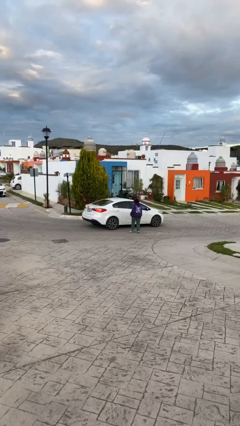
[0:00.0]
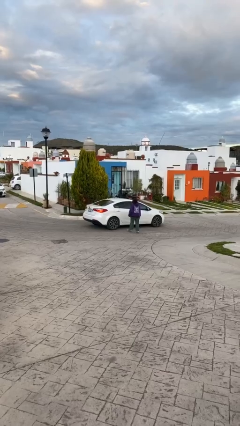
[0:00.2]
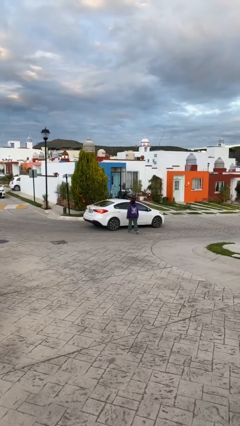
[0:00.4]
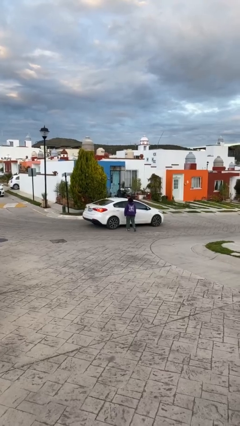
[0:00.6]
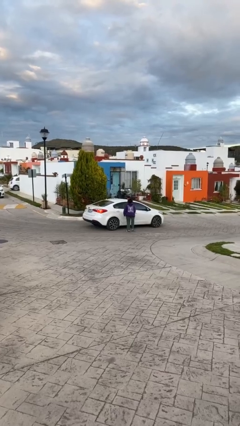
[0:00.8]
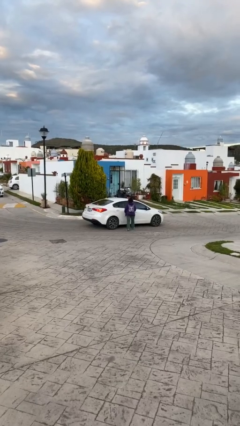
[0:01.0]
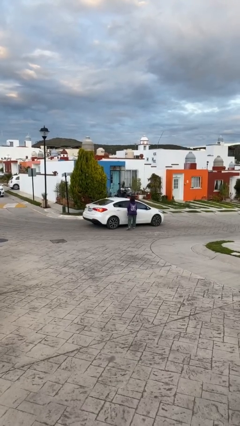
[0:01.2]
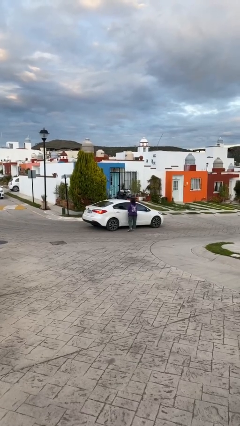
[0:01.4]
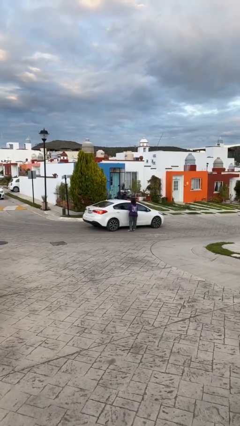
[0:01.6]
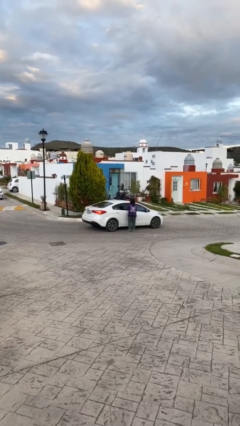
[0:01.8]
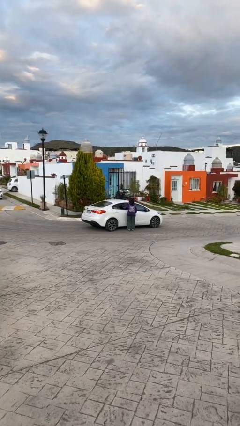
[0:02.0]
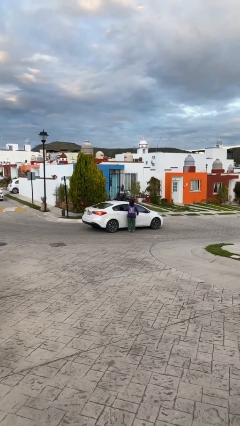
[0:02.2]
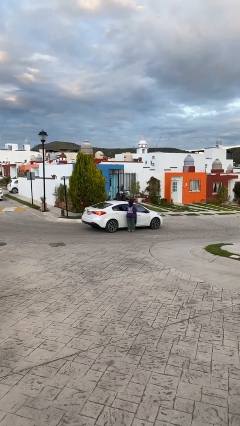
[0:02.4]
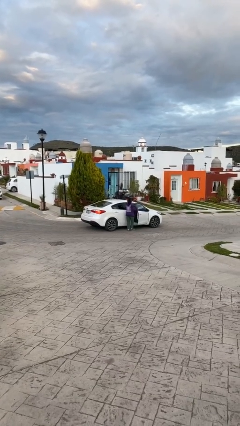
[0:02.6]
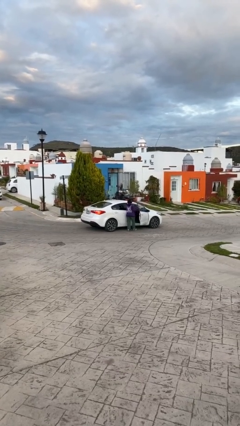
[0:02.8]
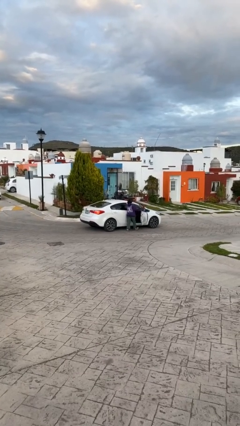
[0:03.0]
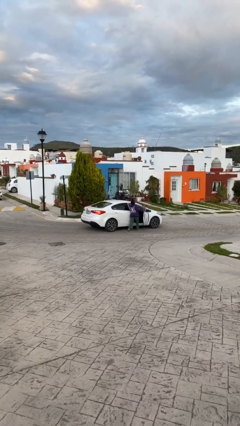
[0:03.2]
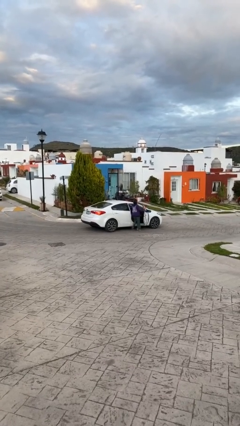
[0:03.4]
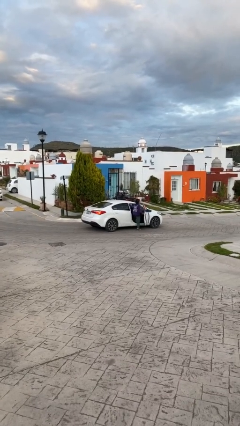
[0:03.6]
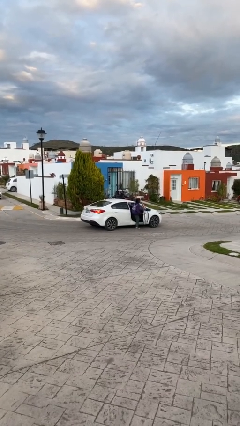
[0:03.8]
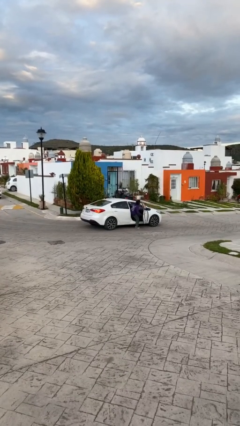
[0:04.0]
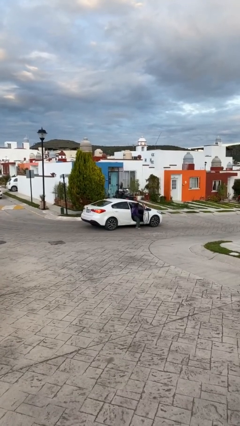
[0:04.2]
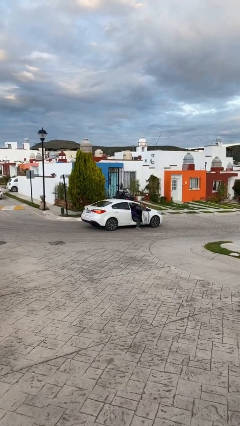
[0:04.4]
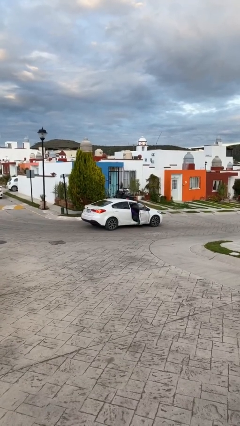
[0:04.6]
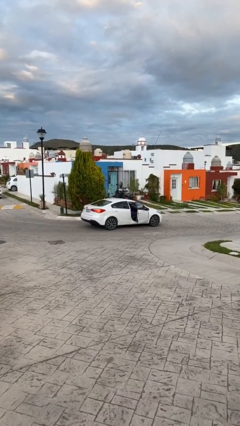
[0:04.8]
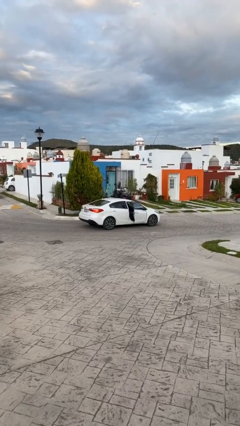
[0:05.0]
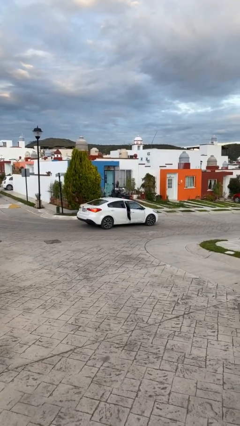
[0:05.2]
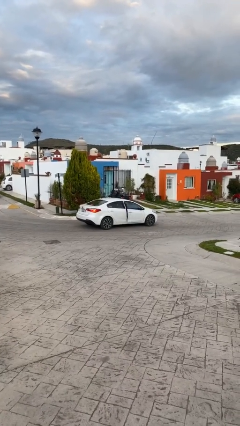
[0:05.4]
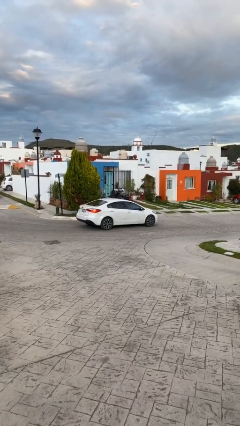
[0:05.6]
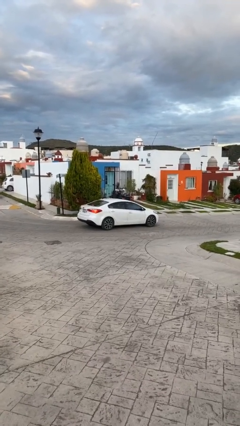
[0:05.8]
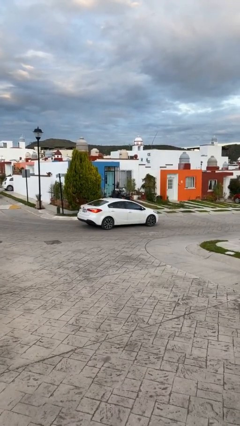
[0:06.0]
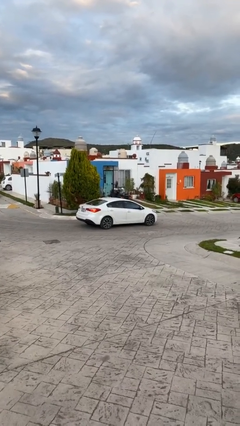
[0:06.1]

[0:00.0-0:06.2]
car picks up person

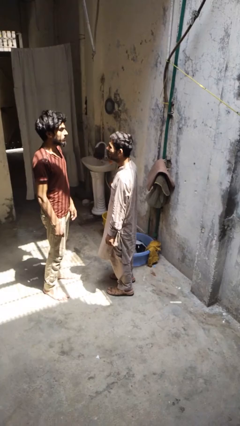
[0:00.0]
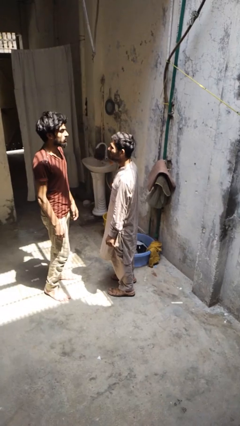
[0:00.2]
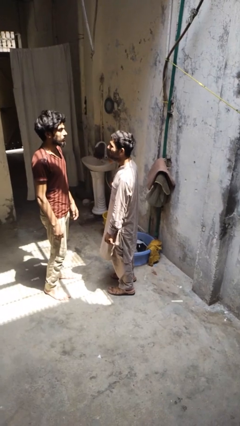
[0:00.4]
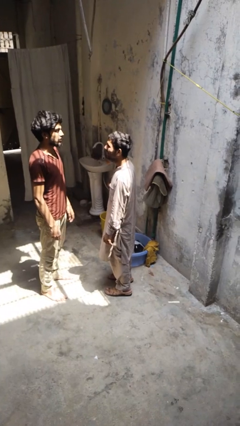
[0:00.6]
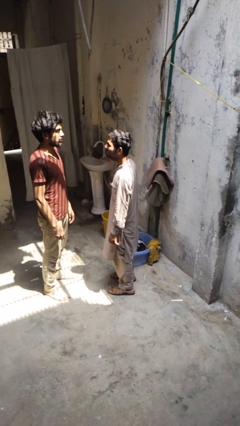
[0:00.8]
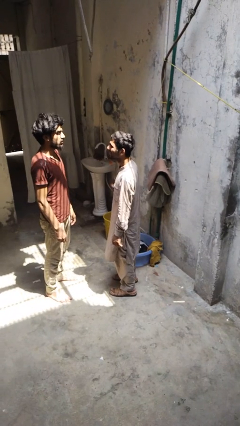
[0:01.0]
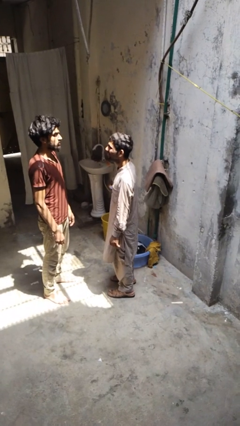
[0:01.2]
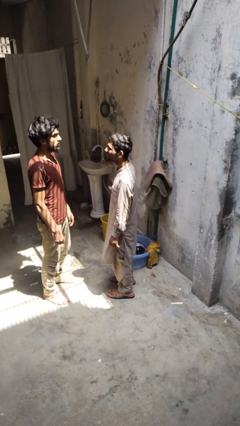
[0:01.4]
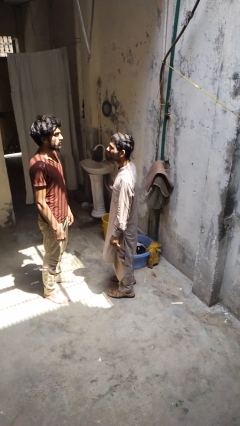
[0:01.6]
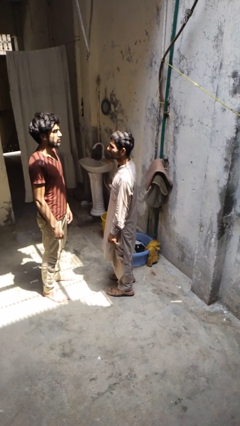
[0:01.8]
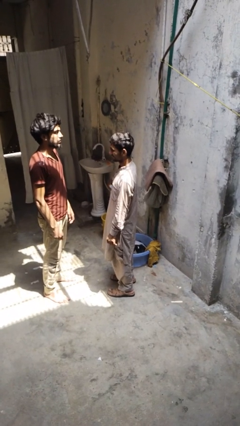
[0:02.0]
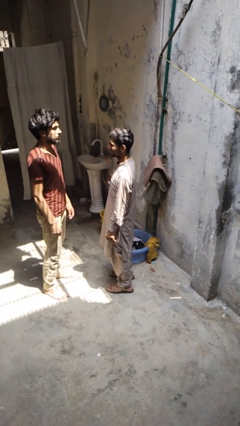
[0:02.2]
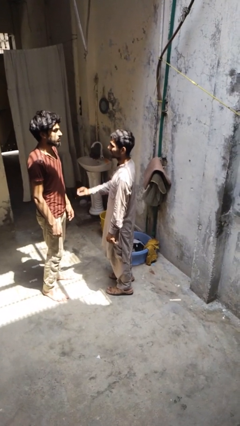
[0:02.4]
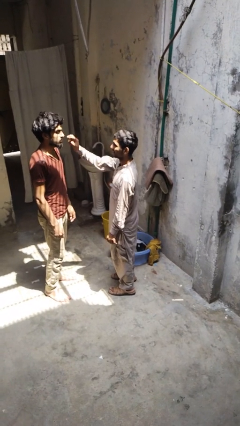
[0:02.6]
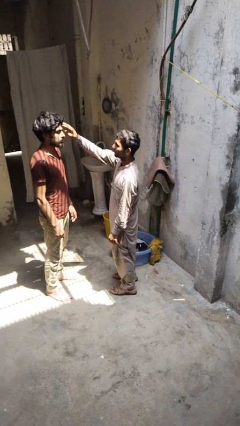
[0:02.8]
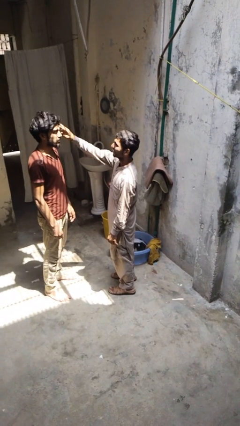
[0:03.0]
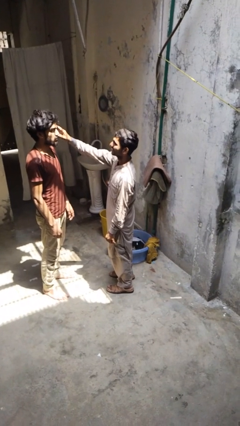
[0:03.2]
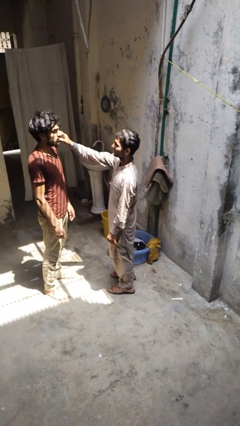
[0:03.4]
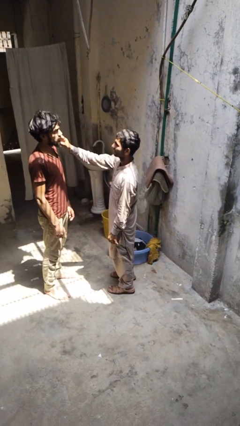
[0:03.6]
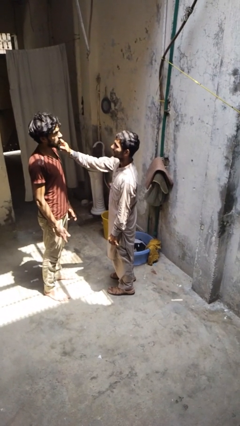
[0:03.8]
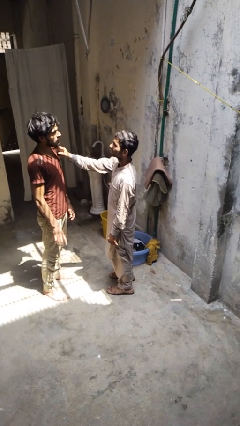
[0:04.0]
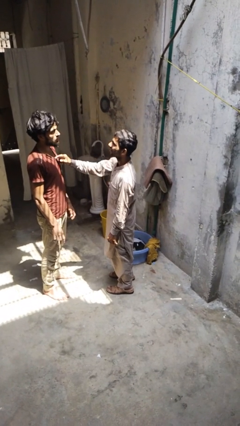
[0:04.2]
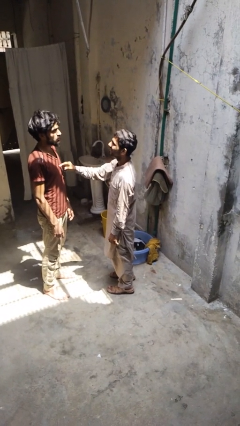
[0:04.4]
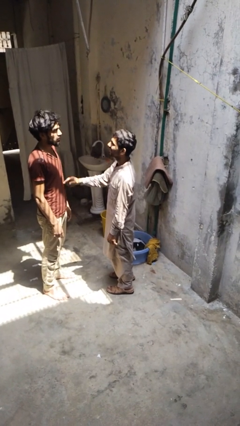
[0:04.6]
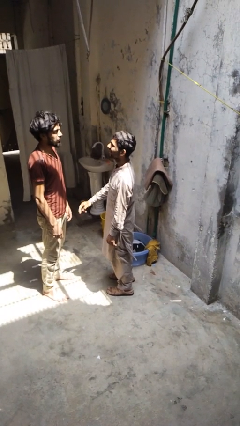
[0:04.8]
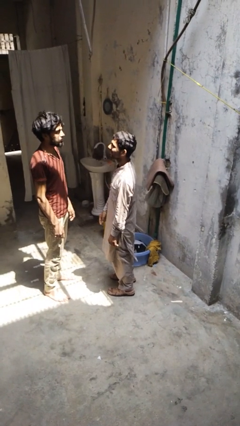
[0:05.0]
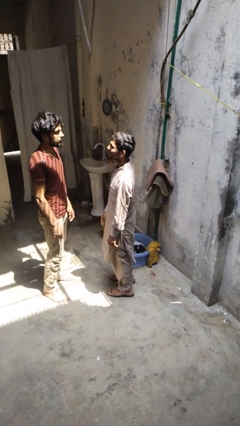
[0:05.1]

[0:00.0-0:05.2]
person touches face of person

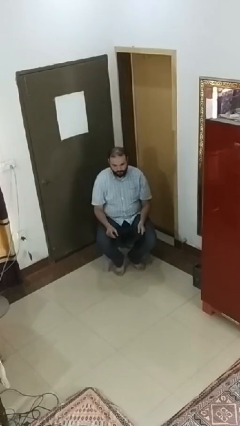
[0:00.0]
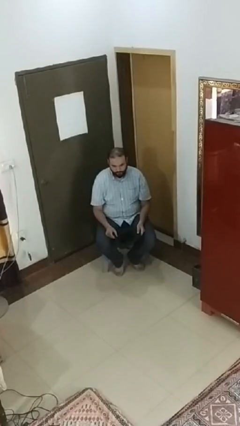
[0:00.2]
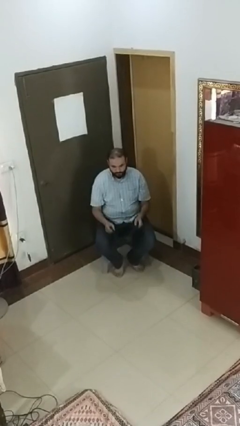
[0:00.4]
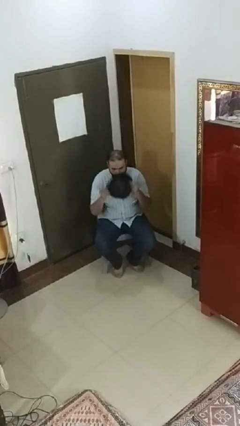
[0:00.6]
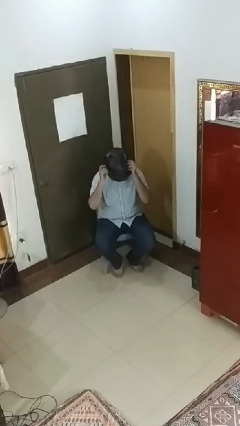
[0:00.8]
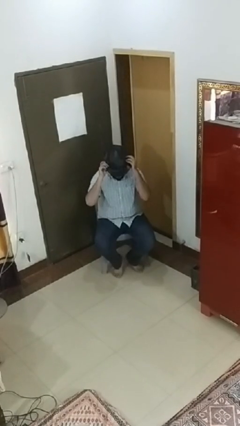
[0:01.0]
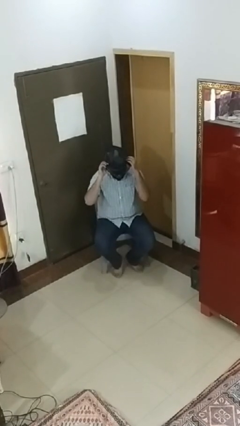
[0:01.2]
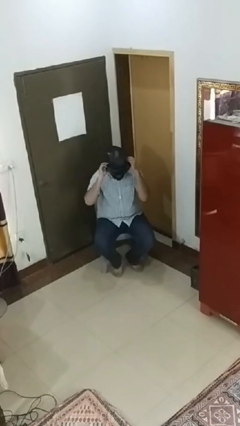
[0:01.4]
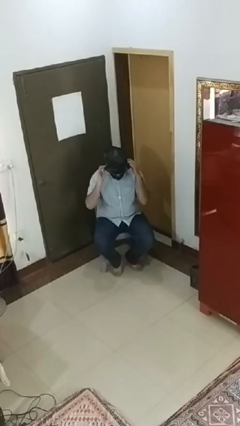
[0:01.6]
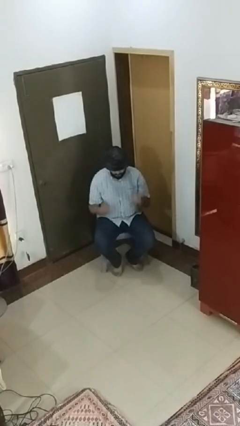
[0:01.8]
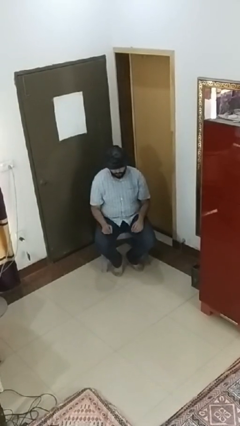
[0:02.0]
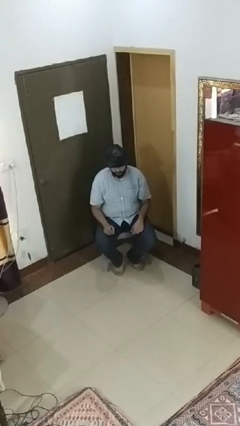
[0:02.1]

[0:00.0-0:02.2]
person puts on hat

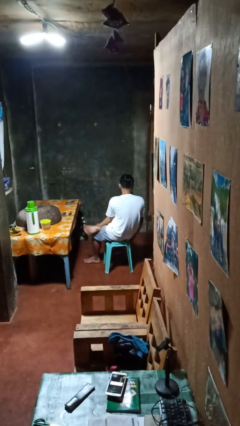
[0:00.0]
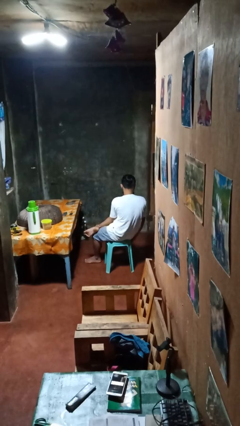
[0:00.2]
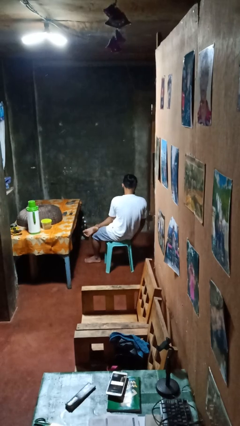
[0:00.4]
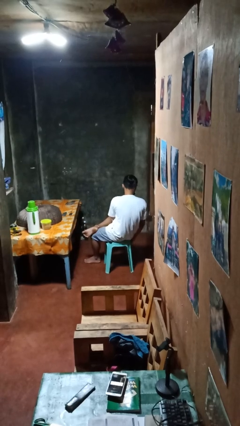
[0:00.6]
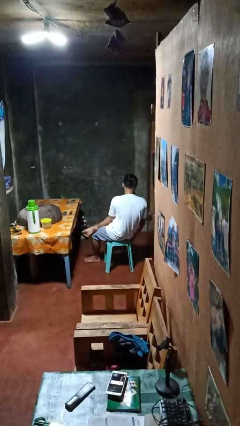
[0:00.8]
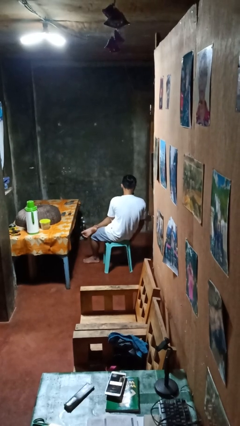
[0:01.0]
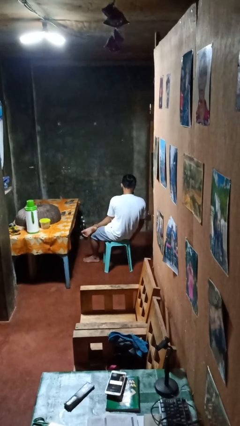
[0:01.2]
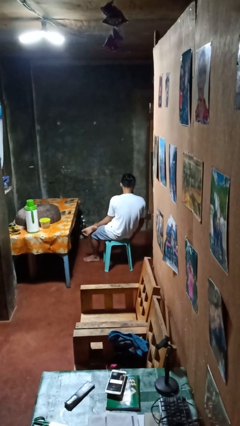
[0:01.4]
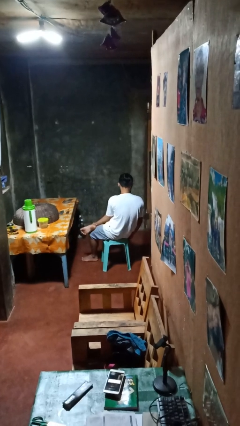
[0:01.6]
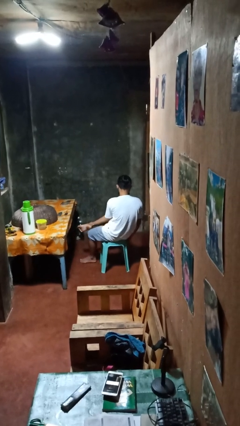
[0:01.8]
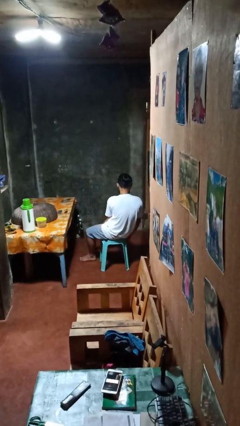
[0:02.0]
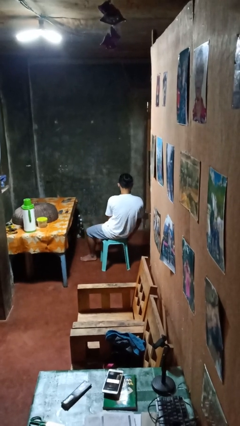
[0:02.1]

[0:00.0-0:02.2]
person crosses legs

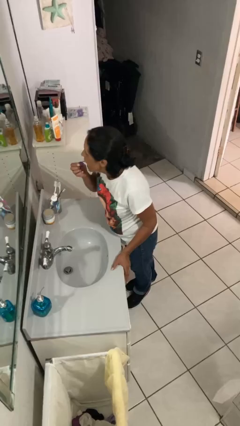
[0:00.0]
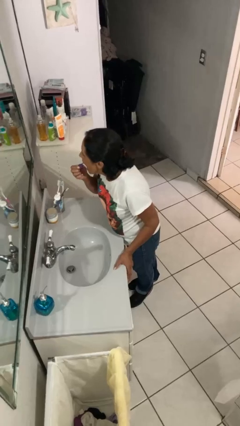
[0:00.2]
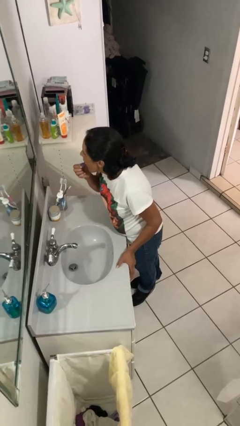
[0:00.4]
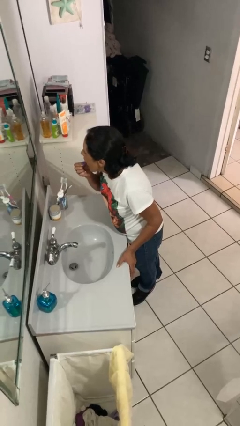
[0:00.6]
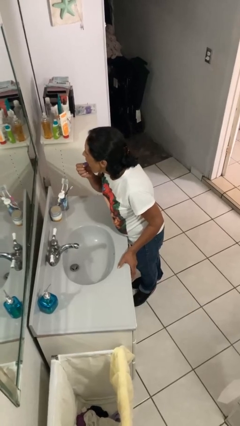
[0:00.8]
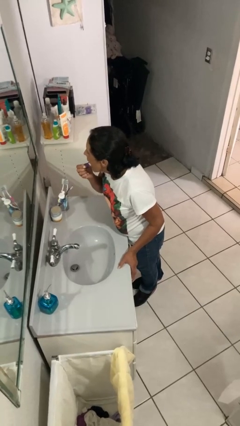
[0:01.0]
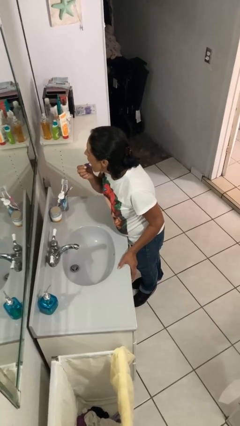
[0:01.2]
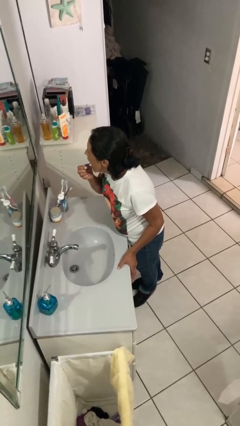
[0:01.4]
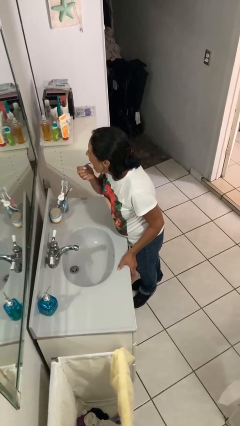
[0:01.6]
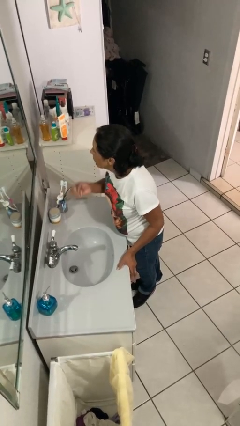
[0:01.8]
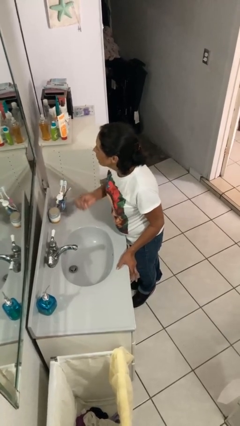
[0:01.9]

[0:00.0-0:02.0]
person flosses
